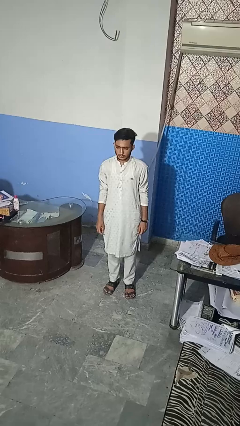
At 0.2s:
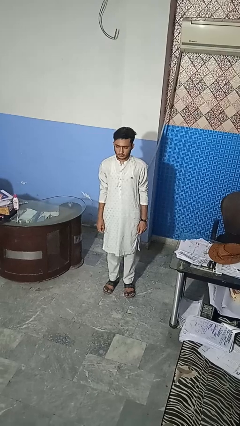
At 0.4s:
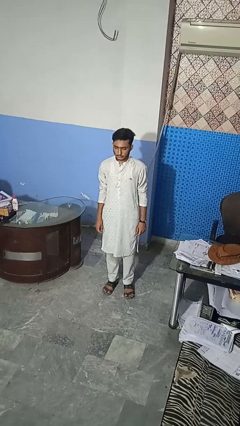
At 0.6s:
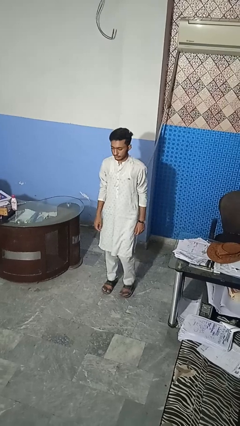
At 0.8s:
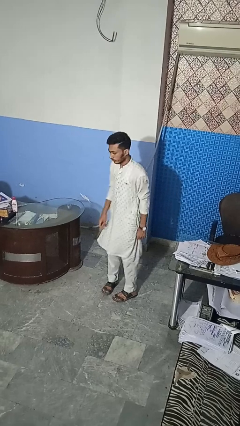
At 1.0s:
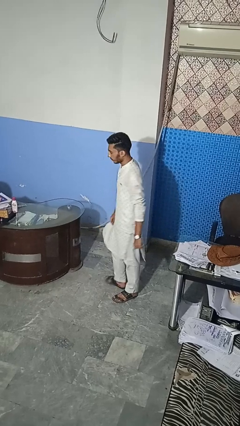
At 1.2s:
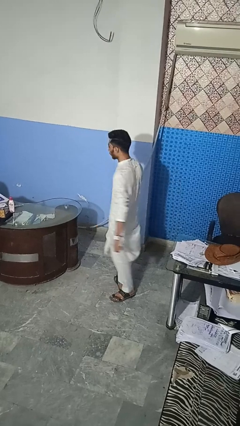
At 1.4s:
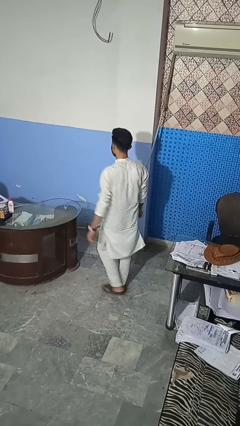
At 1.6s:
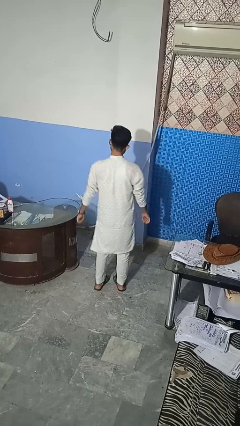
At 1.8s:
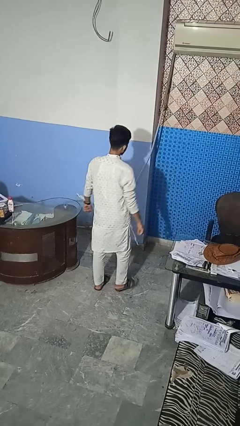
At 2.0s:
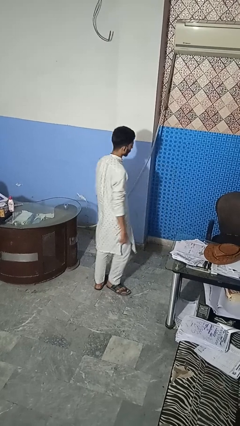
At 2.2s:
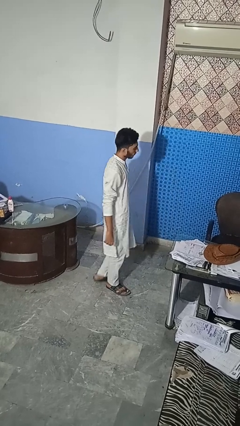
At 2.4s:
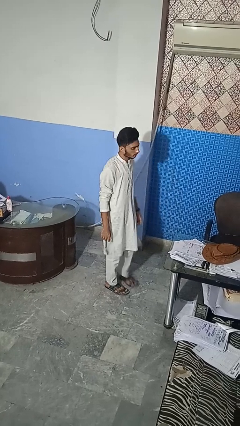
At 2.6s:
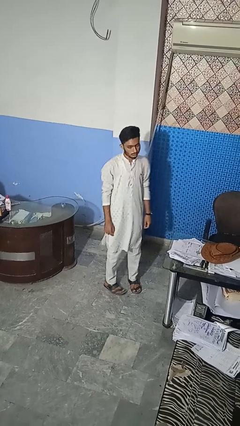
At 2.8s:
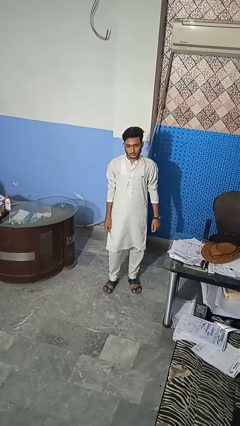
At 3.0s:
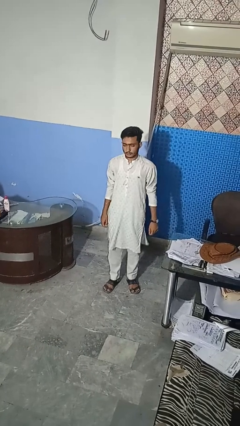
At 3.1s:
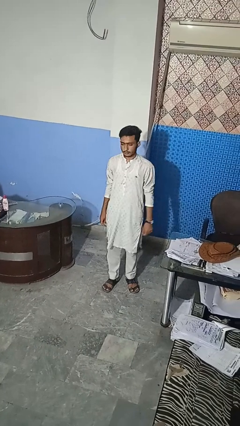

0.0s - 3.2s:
person twirls

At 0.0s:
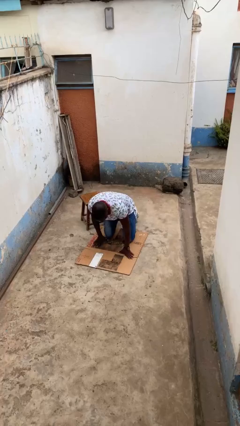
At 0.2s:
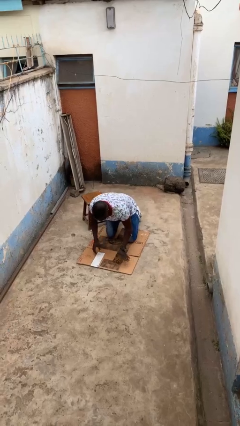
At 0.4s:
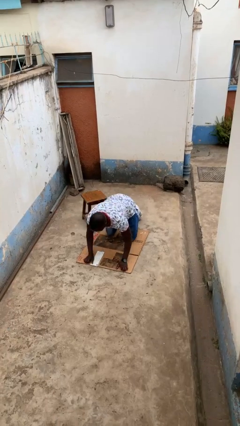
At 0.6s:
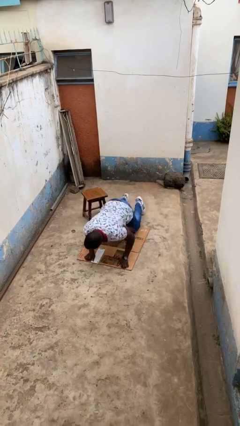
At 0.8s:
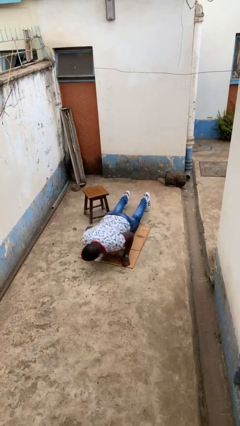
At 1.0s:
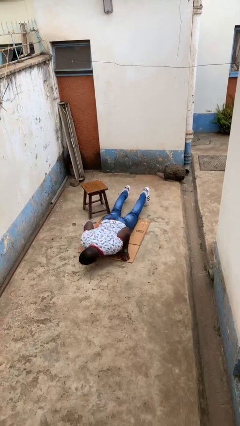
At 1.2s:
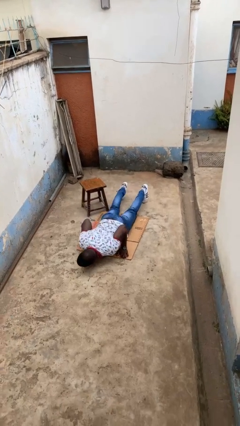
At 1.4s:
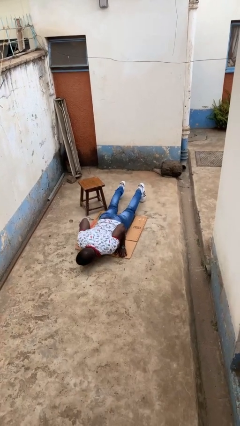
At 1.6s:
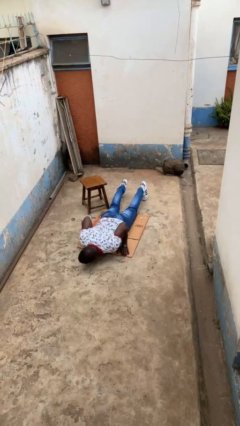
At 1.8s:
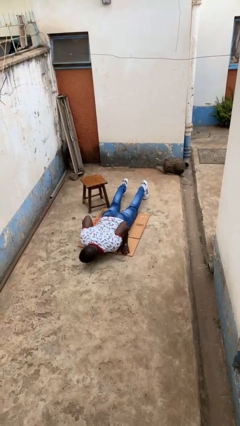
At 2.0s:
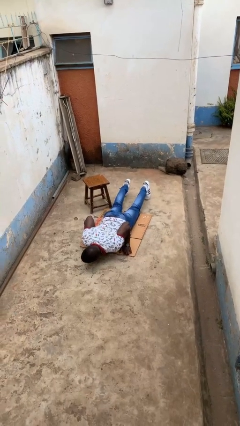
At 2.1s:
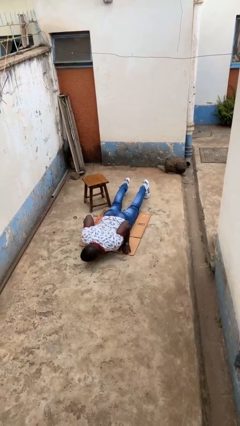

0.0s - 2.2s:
person lies down on floor

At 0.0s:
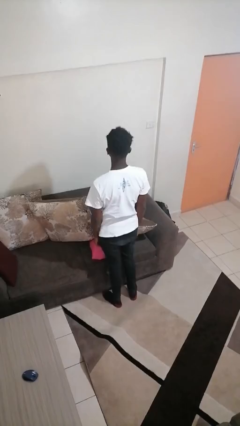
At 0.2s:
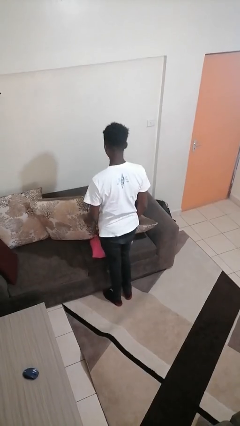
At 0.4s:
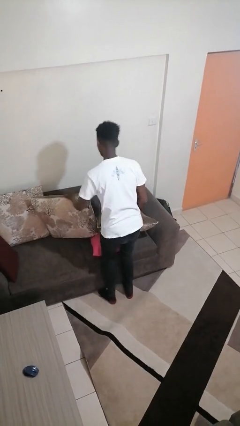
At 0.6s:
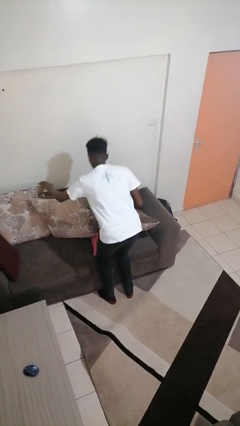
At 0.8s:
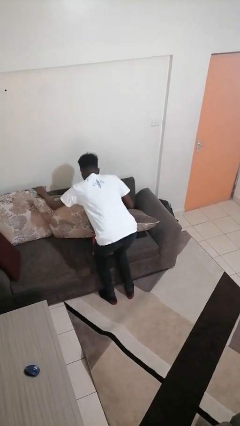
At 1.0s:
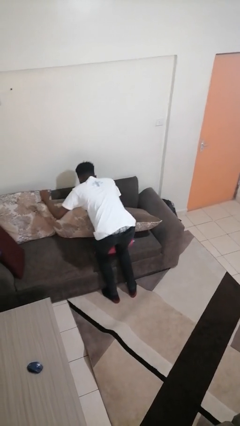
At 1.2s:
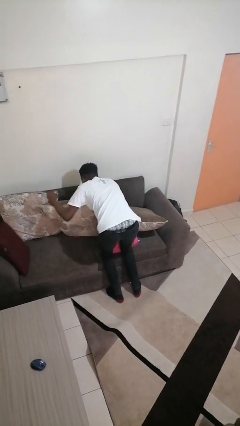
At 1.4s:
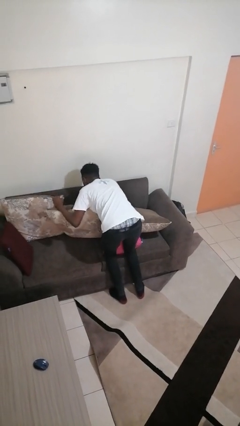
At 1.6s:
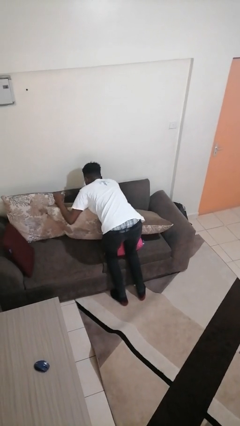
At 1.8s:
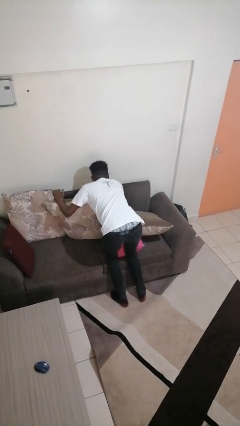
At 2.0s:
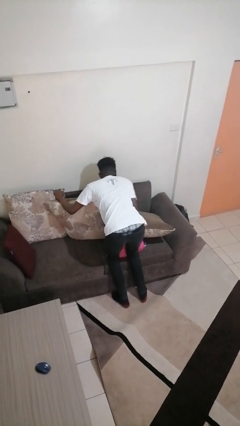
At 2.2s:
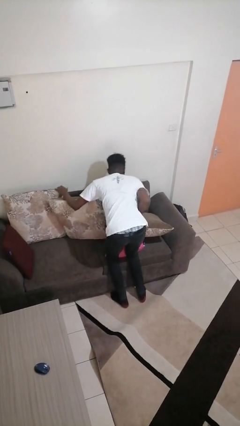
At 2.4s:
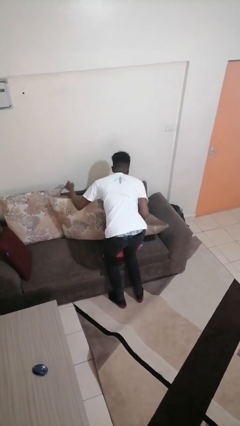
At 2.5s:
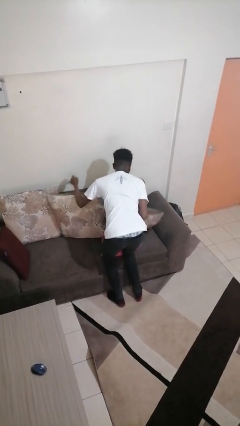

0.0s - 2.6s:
person searches in couch

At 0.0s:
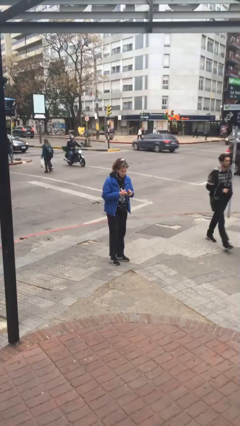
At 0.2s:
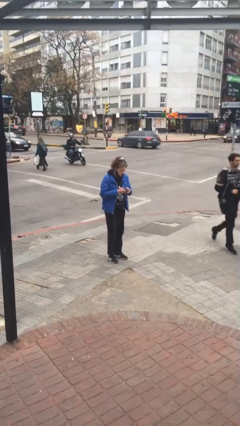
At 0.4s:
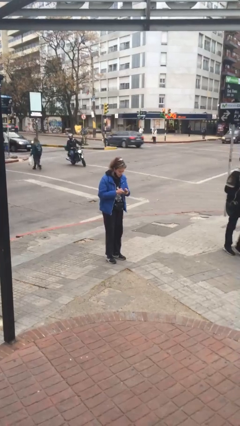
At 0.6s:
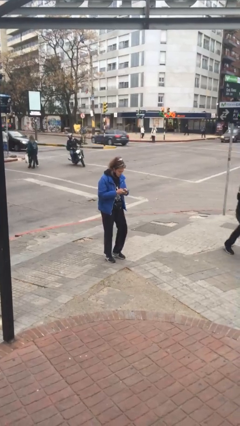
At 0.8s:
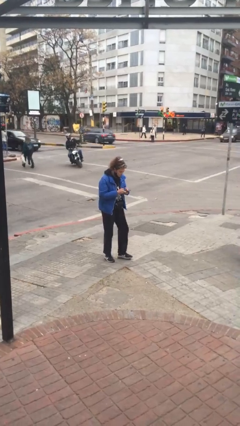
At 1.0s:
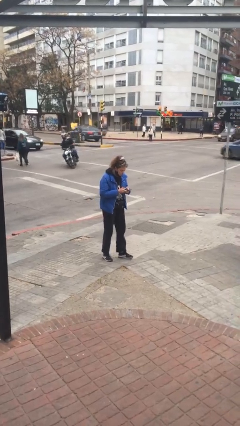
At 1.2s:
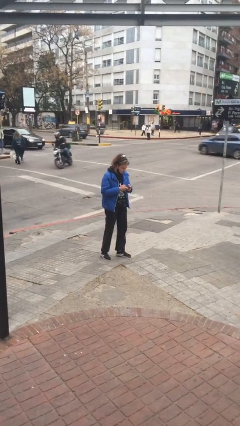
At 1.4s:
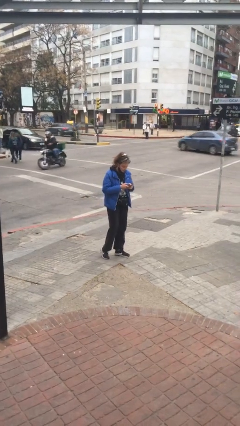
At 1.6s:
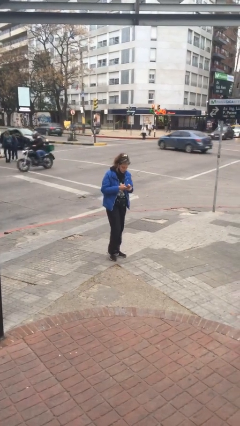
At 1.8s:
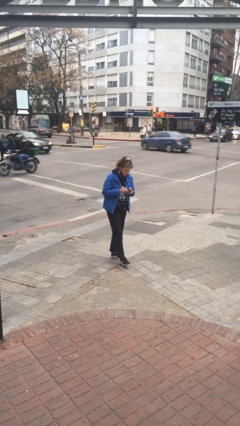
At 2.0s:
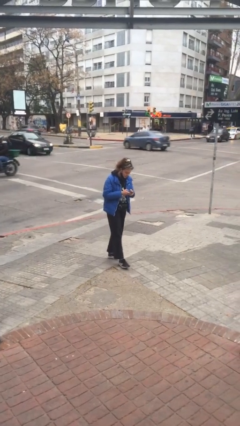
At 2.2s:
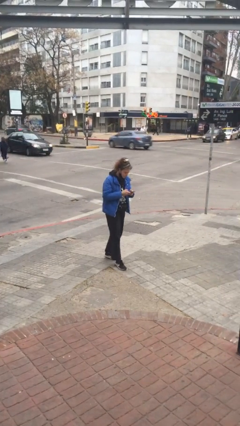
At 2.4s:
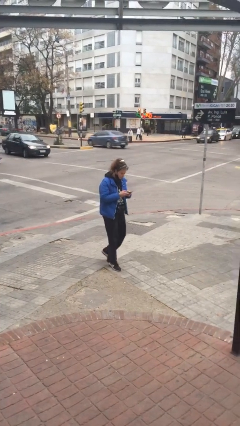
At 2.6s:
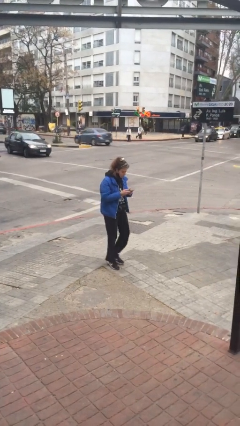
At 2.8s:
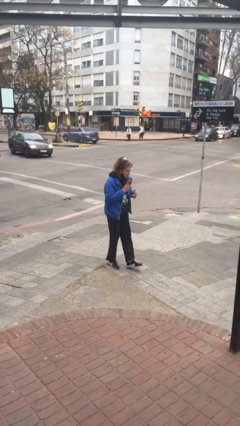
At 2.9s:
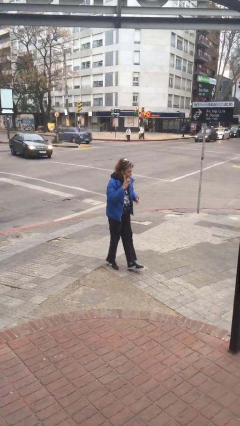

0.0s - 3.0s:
person texts on phone

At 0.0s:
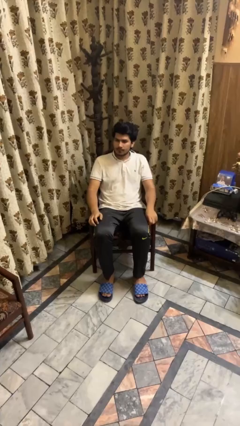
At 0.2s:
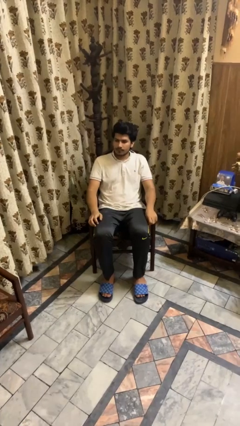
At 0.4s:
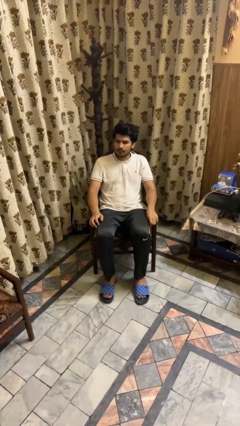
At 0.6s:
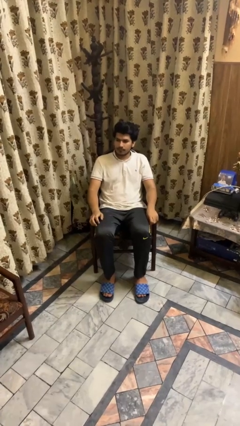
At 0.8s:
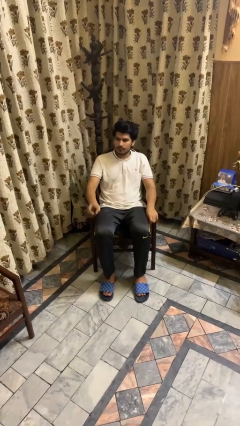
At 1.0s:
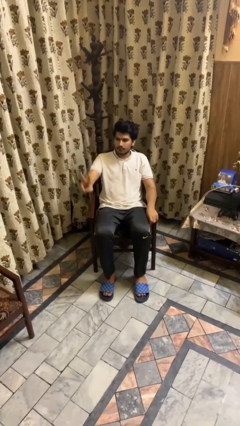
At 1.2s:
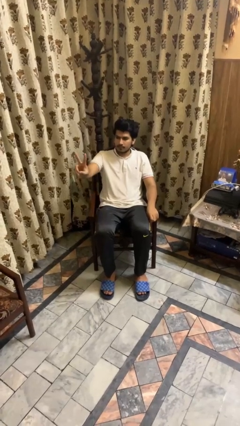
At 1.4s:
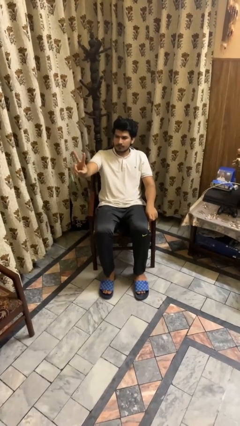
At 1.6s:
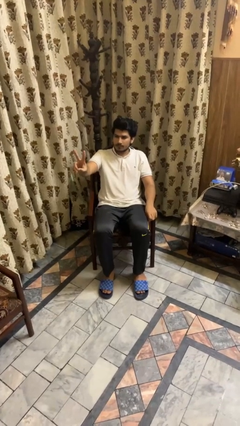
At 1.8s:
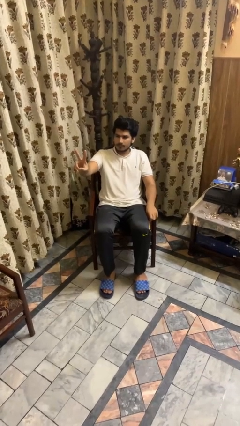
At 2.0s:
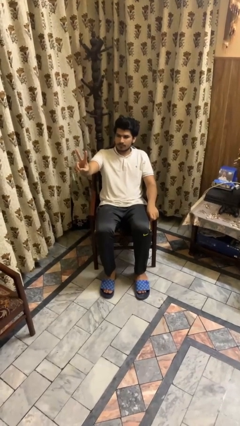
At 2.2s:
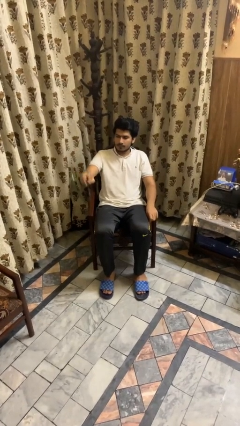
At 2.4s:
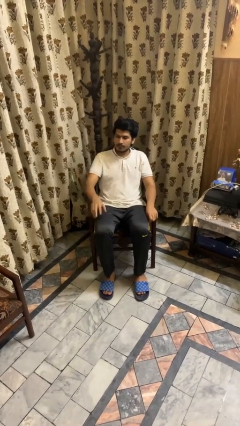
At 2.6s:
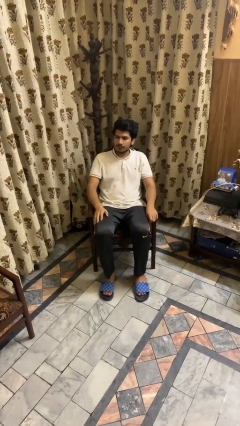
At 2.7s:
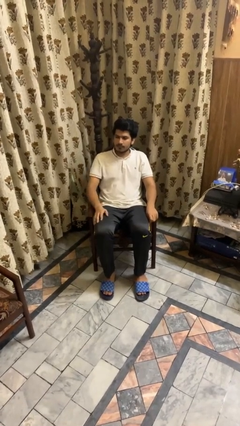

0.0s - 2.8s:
person gestures peace

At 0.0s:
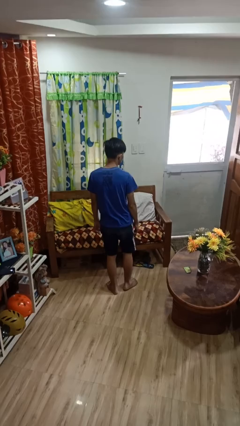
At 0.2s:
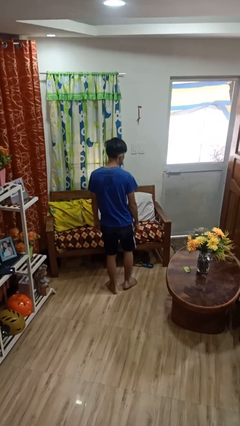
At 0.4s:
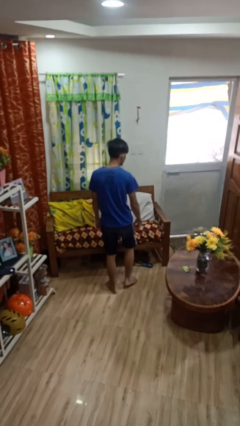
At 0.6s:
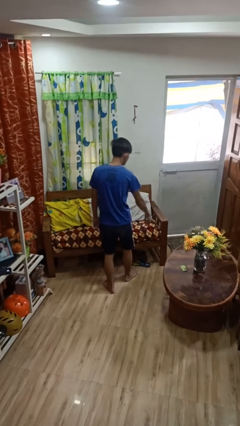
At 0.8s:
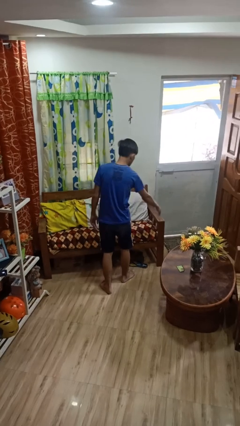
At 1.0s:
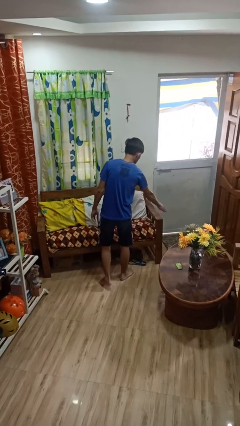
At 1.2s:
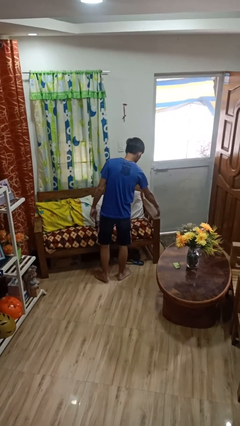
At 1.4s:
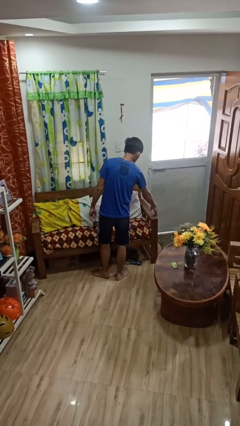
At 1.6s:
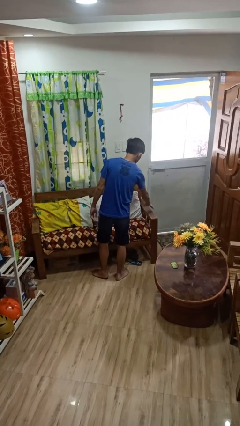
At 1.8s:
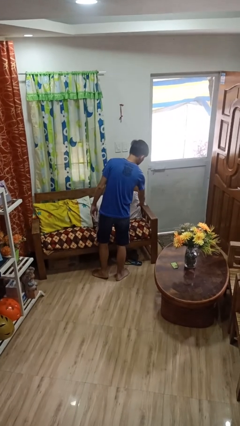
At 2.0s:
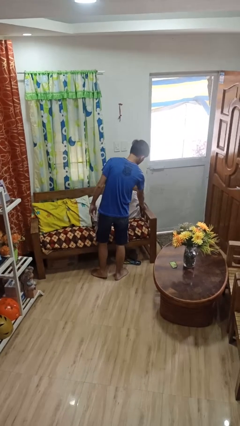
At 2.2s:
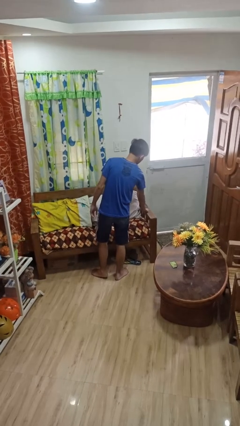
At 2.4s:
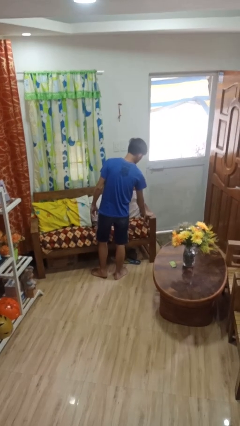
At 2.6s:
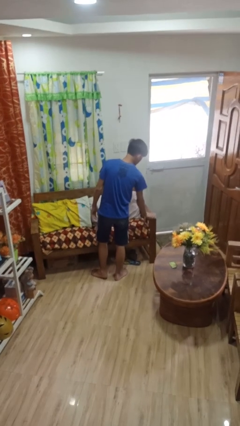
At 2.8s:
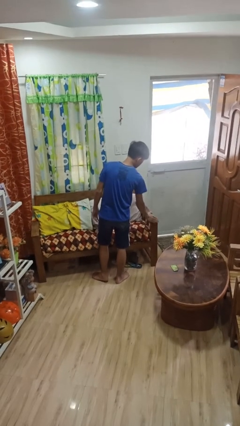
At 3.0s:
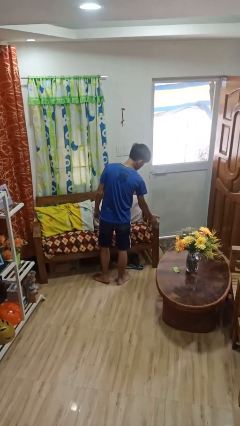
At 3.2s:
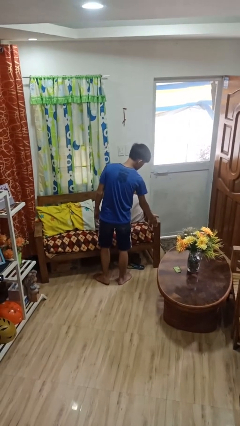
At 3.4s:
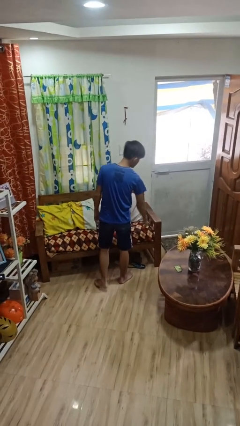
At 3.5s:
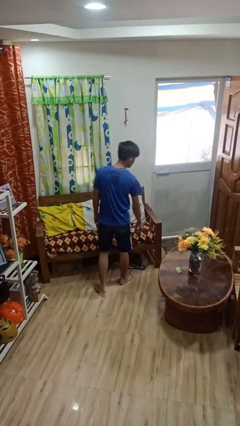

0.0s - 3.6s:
person taps object with finger

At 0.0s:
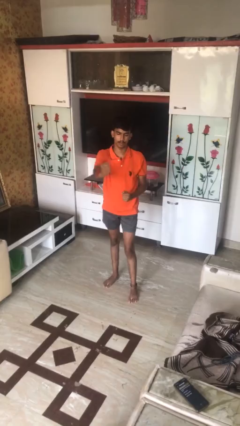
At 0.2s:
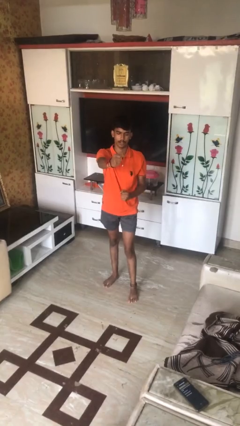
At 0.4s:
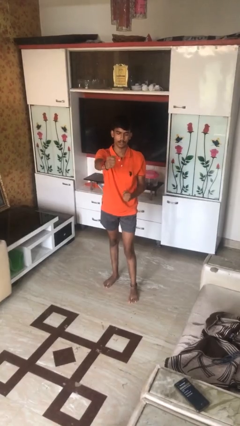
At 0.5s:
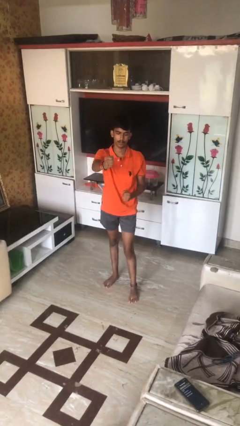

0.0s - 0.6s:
person punches
